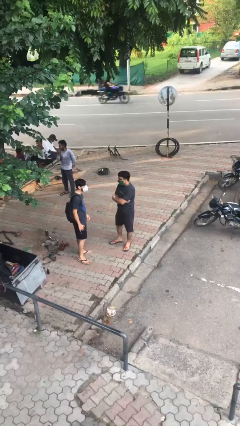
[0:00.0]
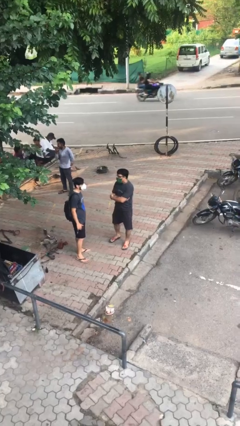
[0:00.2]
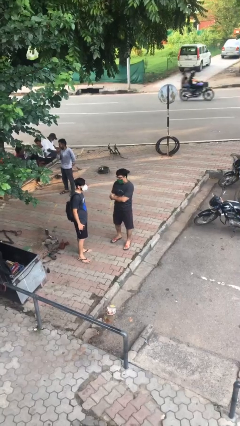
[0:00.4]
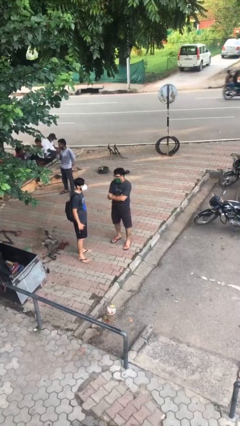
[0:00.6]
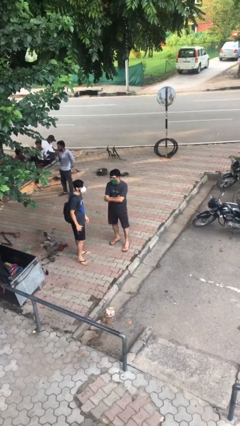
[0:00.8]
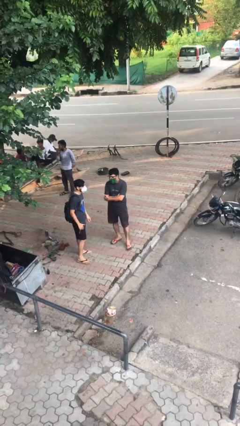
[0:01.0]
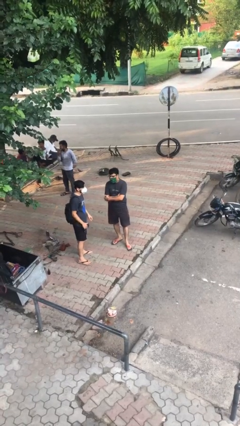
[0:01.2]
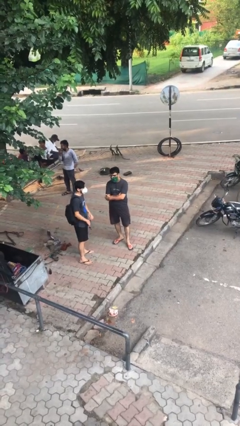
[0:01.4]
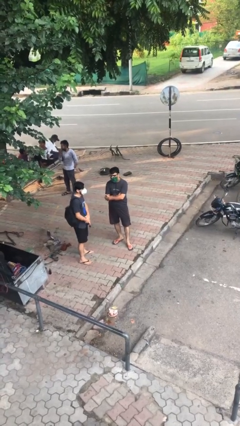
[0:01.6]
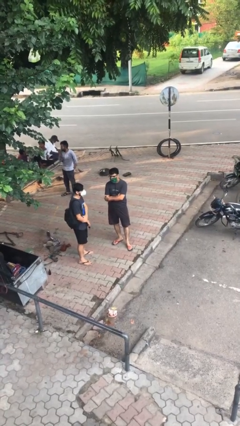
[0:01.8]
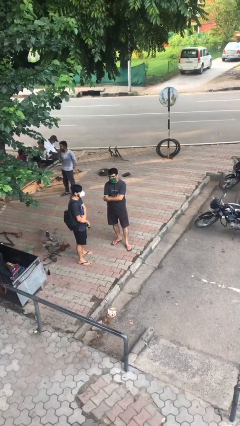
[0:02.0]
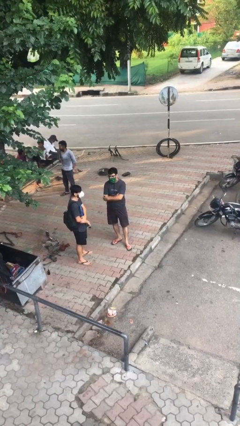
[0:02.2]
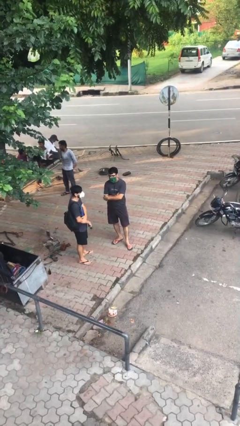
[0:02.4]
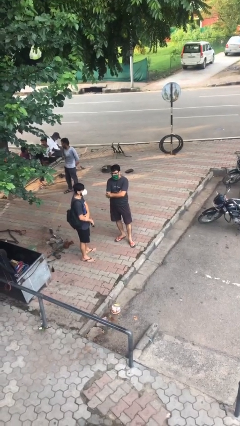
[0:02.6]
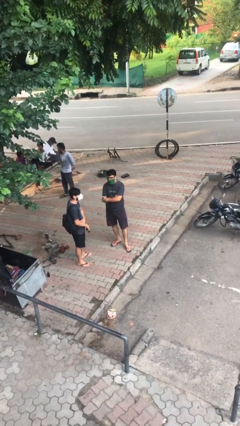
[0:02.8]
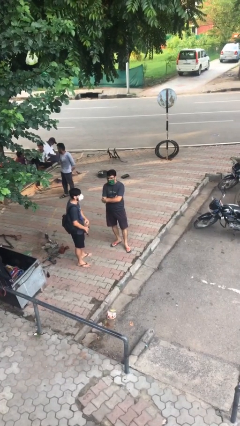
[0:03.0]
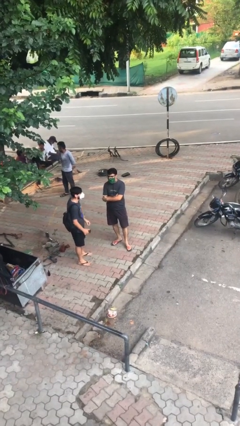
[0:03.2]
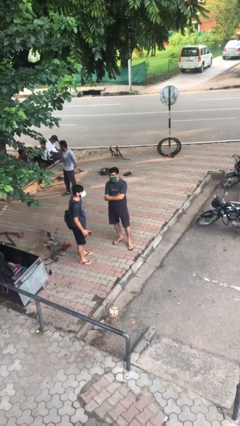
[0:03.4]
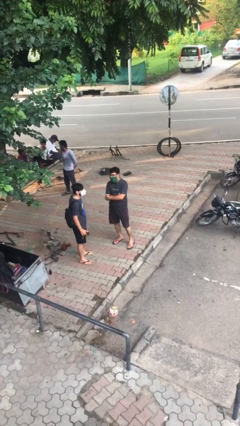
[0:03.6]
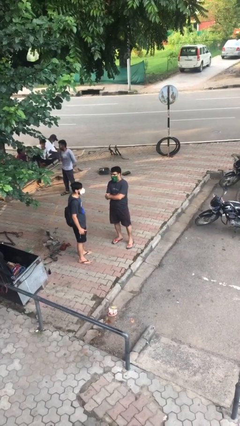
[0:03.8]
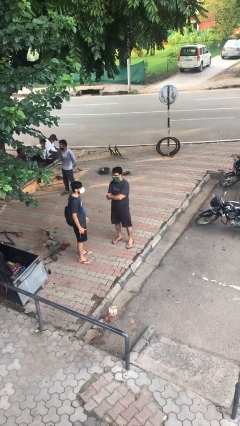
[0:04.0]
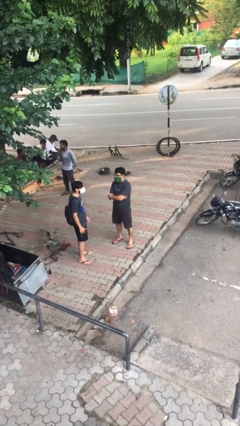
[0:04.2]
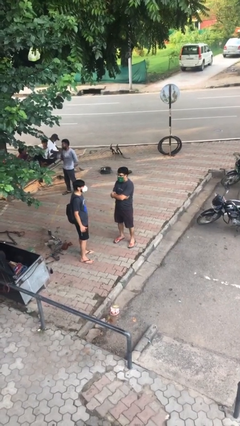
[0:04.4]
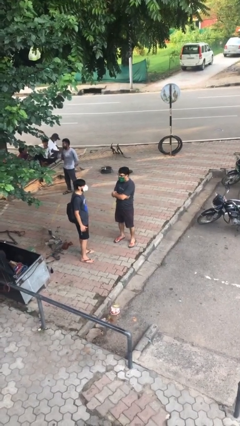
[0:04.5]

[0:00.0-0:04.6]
person talks to person

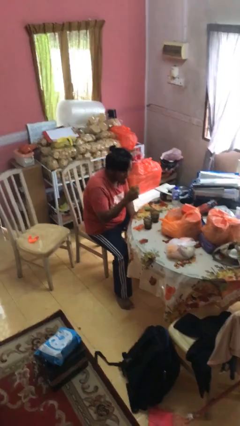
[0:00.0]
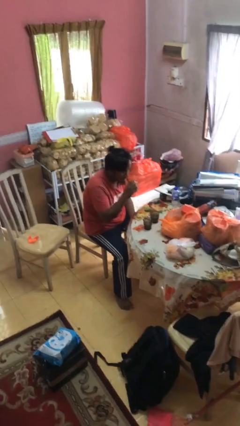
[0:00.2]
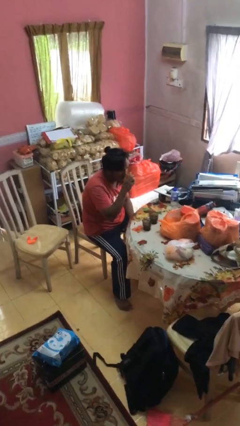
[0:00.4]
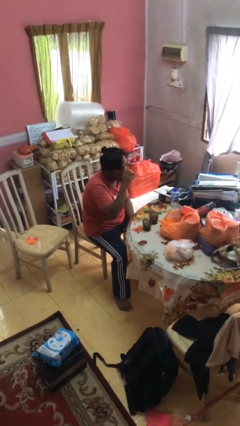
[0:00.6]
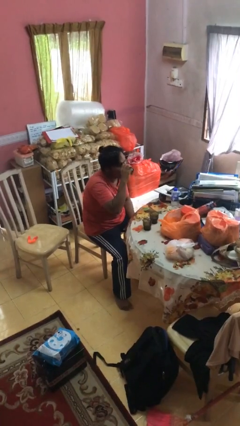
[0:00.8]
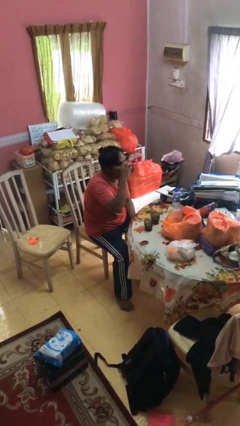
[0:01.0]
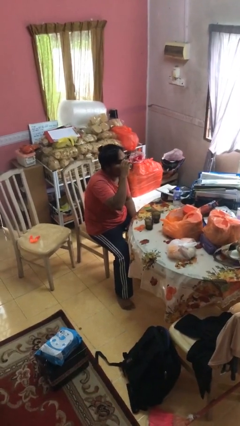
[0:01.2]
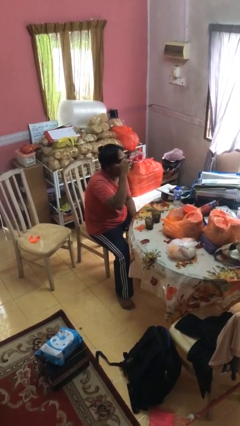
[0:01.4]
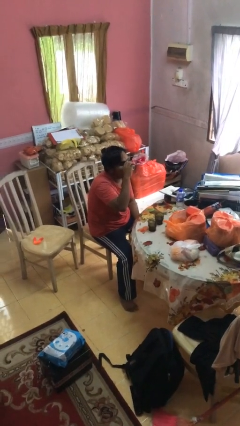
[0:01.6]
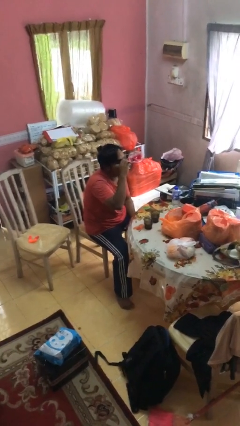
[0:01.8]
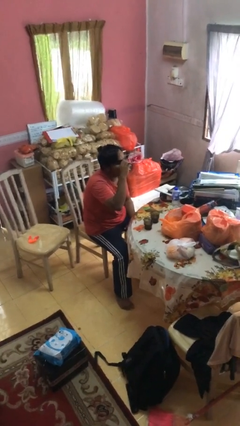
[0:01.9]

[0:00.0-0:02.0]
person drinks from shotglass

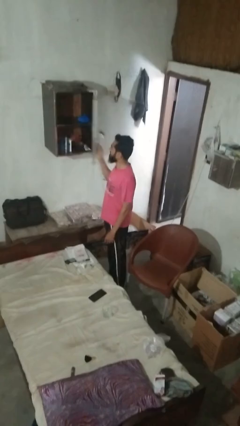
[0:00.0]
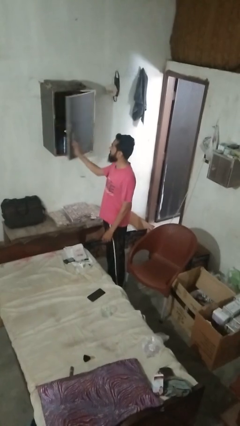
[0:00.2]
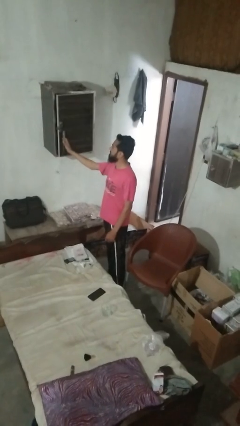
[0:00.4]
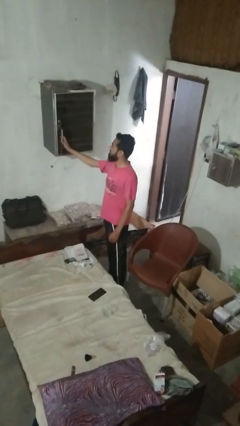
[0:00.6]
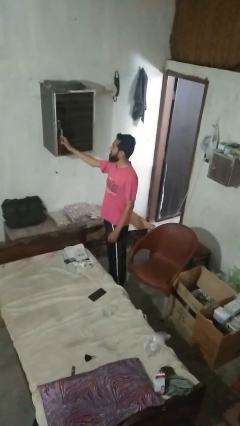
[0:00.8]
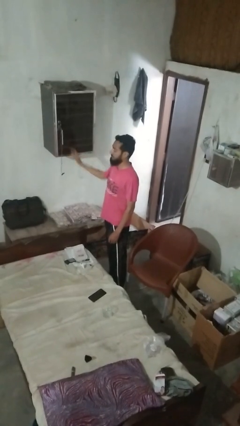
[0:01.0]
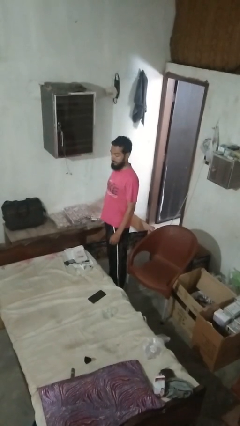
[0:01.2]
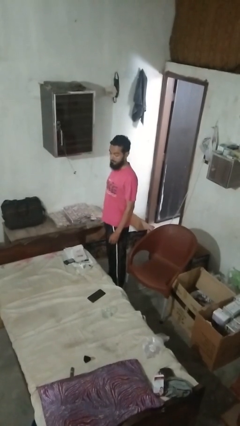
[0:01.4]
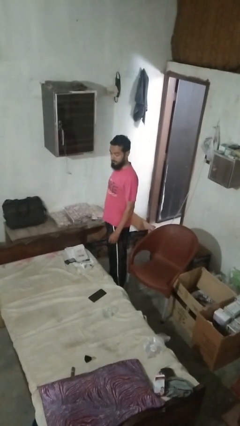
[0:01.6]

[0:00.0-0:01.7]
person closes dresser drawer

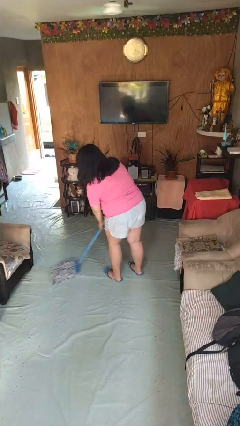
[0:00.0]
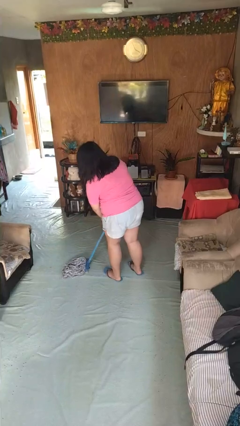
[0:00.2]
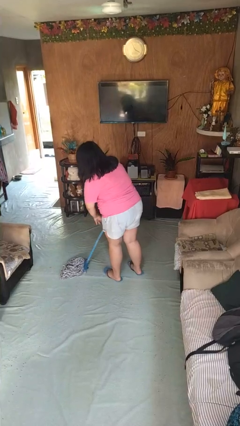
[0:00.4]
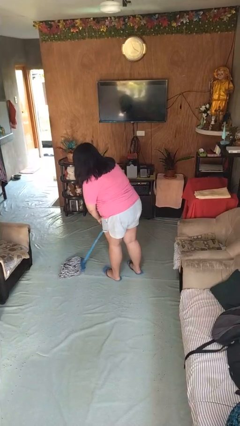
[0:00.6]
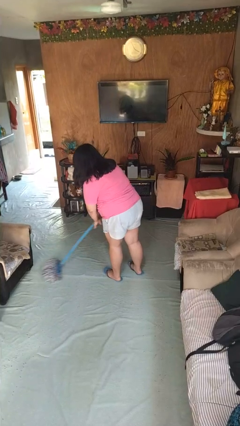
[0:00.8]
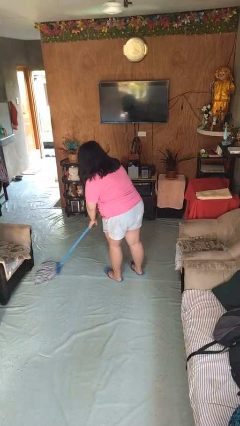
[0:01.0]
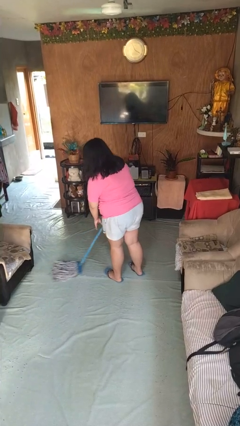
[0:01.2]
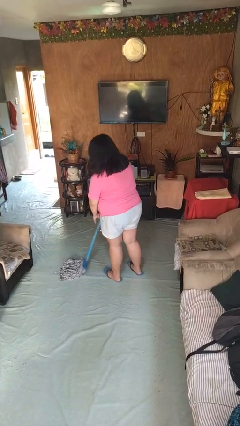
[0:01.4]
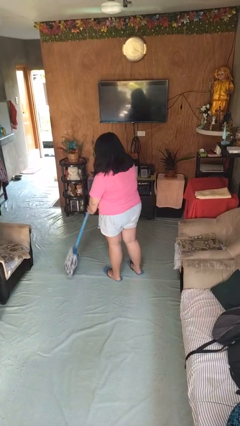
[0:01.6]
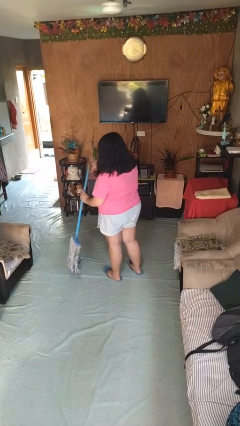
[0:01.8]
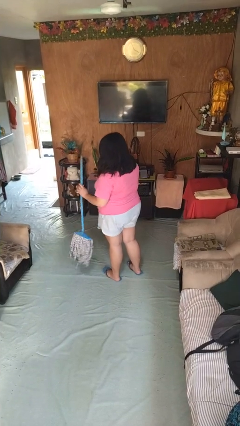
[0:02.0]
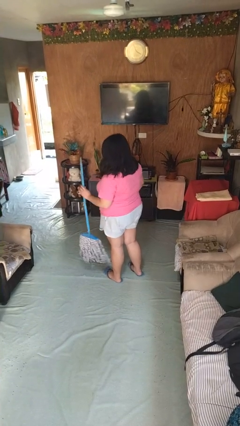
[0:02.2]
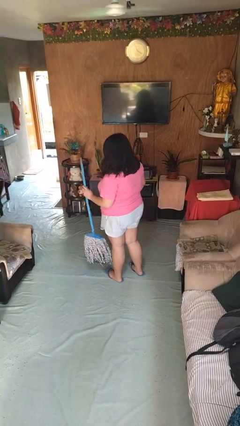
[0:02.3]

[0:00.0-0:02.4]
person mops

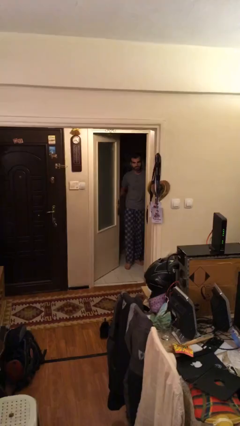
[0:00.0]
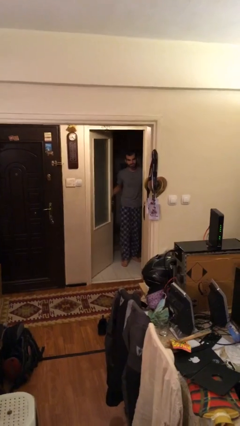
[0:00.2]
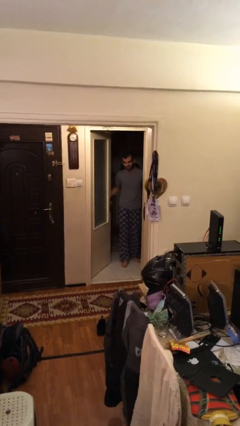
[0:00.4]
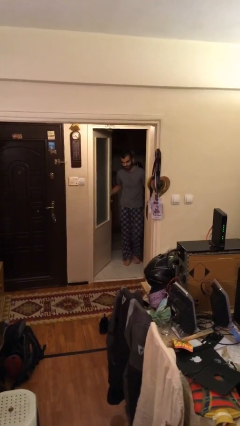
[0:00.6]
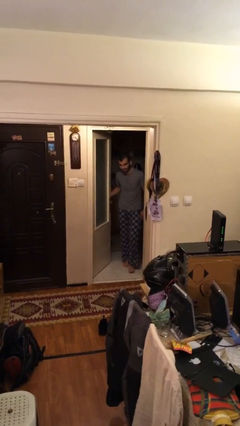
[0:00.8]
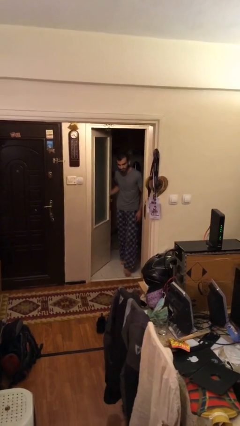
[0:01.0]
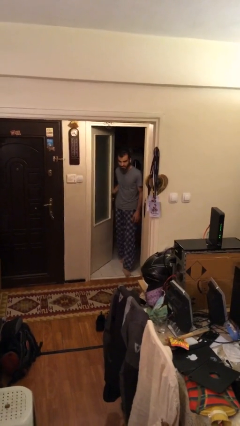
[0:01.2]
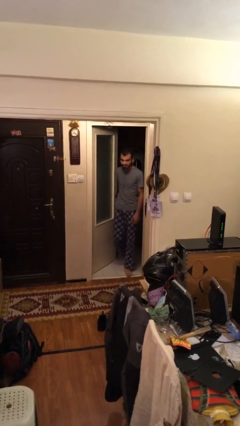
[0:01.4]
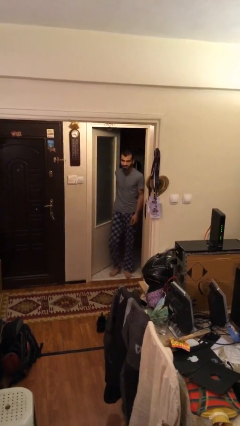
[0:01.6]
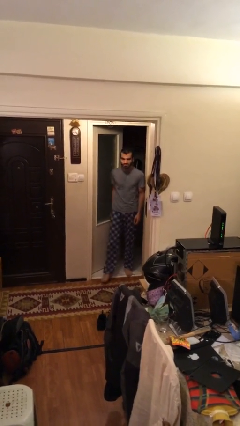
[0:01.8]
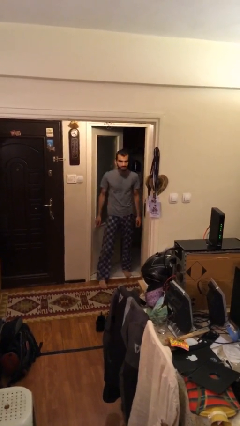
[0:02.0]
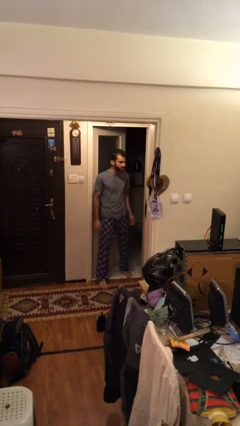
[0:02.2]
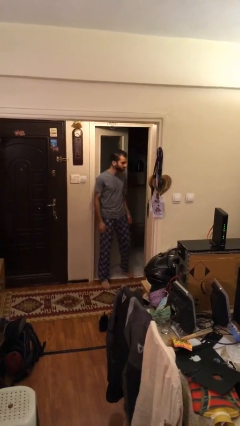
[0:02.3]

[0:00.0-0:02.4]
person enters scene through structure

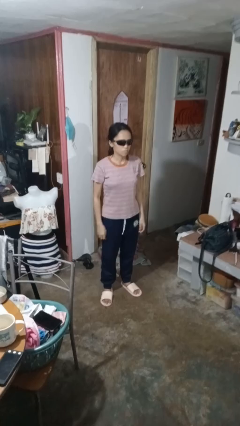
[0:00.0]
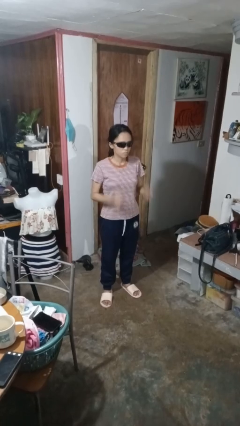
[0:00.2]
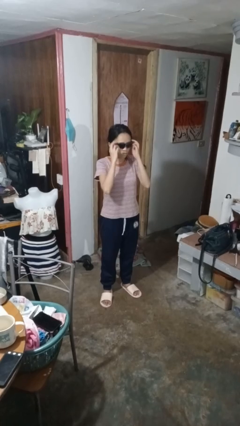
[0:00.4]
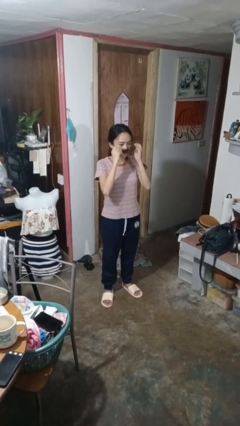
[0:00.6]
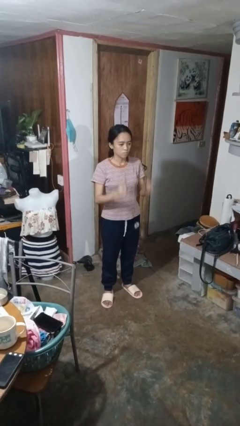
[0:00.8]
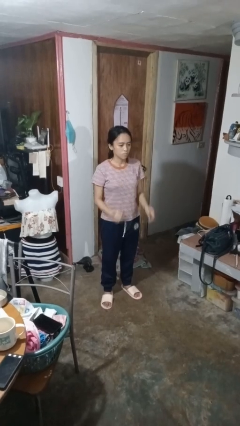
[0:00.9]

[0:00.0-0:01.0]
person takes off sunglasses

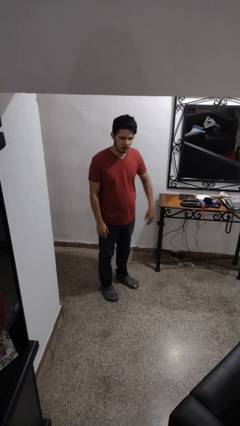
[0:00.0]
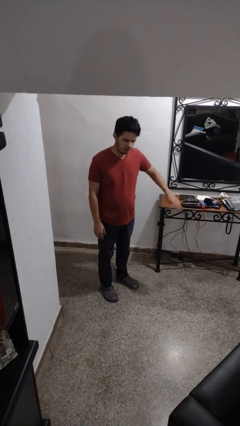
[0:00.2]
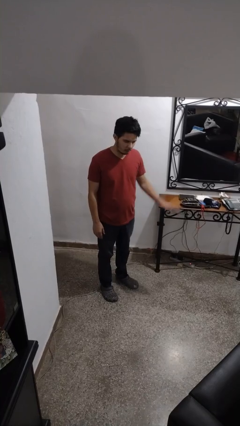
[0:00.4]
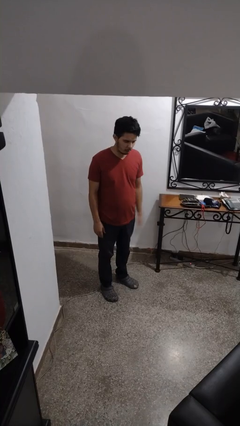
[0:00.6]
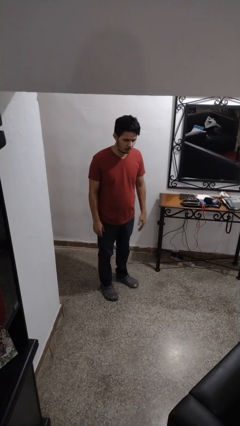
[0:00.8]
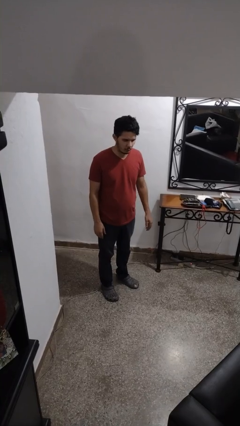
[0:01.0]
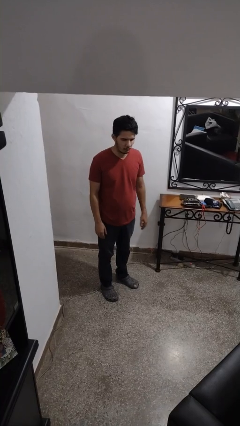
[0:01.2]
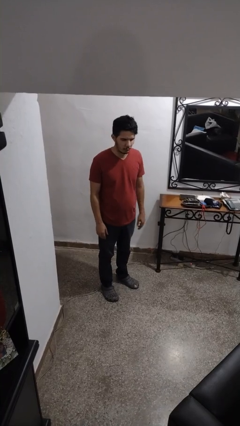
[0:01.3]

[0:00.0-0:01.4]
person slaps hands on thighs

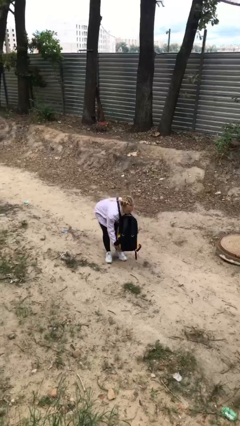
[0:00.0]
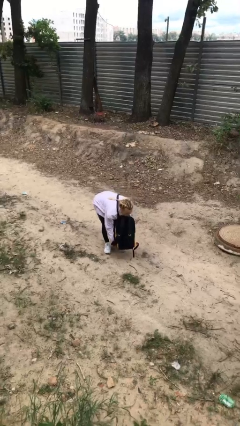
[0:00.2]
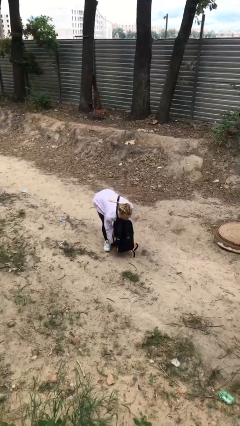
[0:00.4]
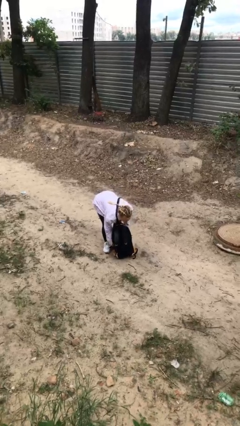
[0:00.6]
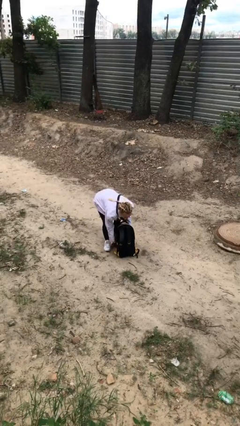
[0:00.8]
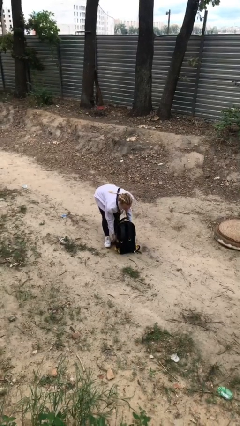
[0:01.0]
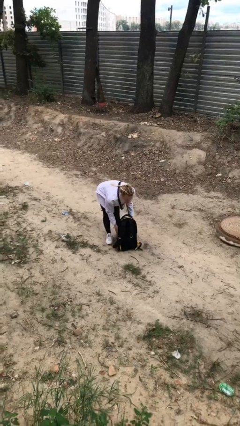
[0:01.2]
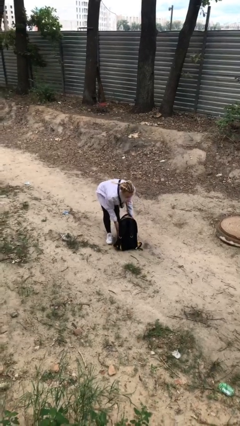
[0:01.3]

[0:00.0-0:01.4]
person puts down object on floor
